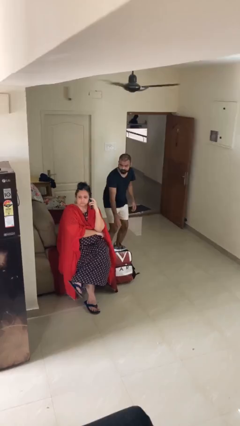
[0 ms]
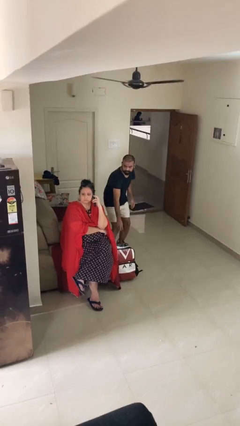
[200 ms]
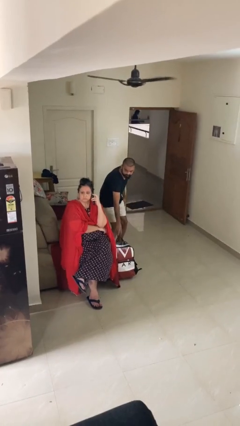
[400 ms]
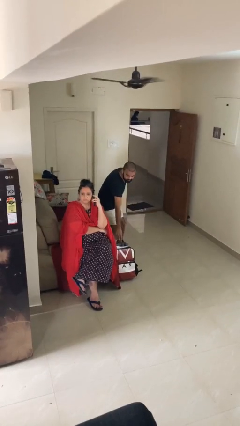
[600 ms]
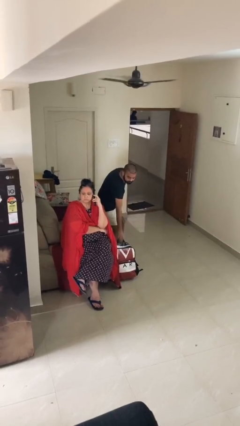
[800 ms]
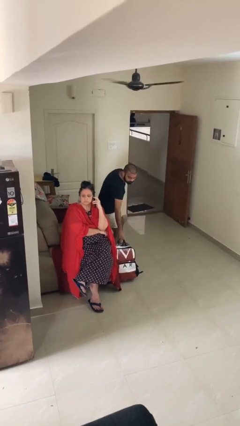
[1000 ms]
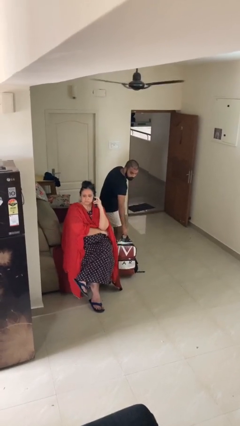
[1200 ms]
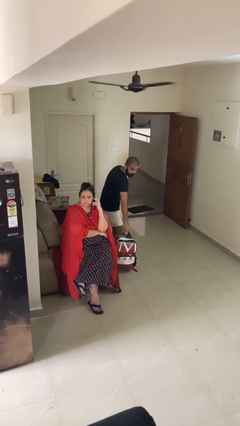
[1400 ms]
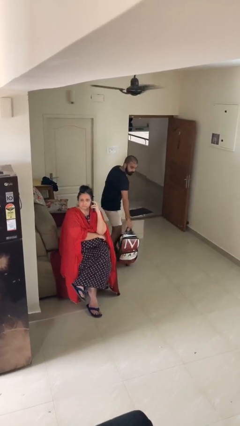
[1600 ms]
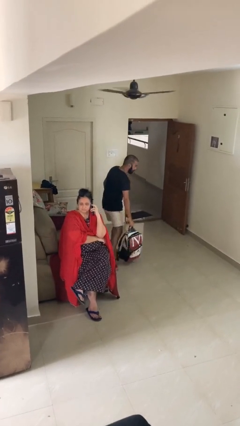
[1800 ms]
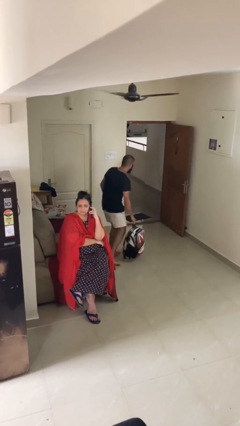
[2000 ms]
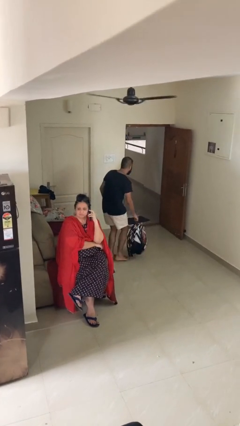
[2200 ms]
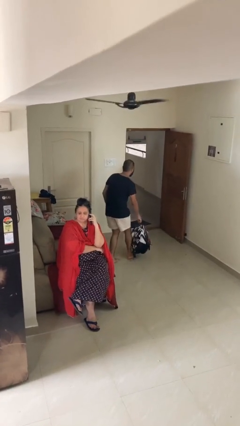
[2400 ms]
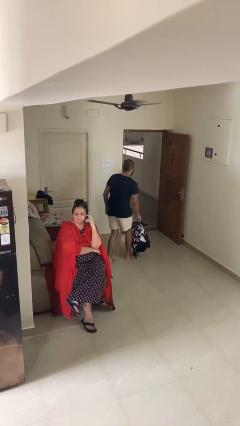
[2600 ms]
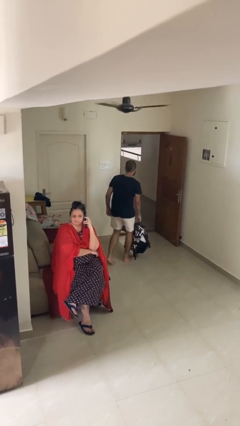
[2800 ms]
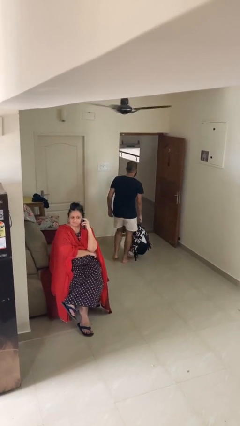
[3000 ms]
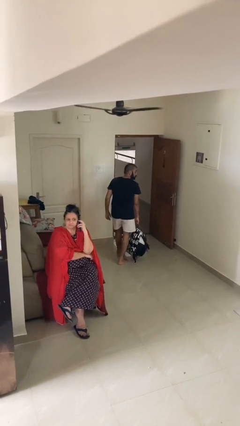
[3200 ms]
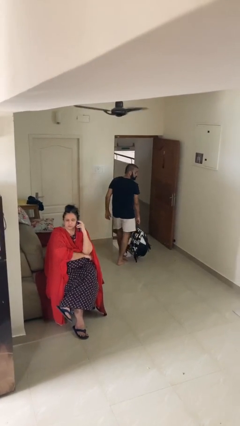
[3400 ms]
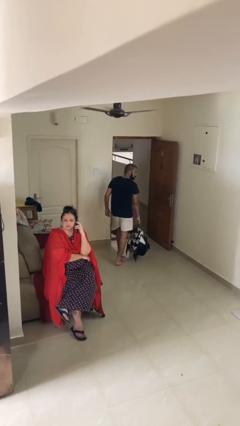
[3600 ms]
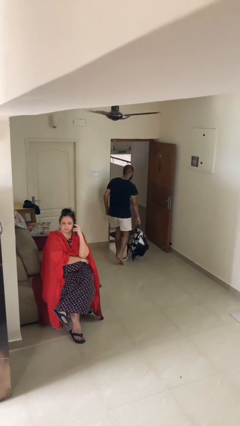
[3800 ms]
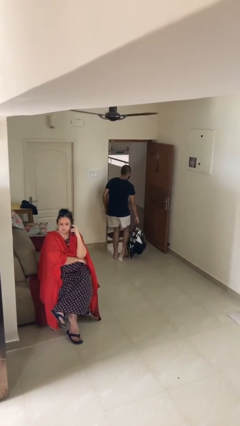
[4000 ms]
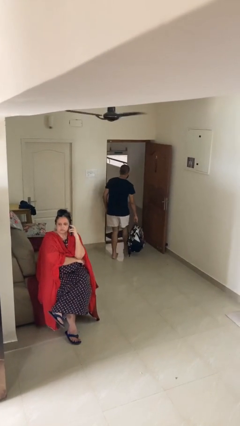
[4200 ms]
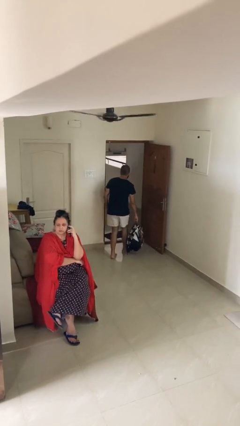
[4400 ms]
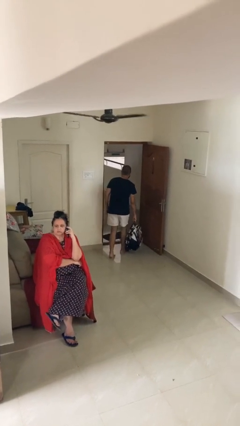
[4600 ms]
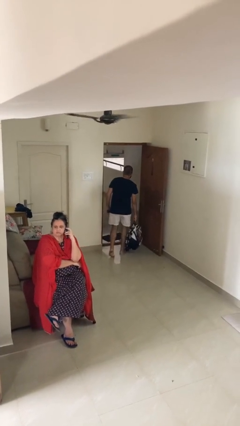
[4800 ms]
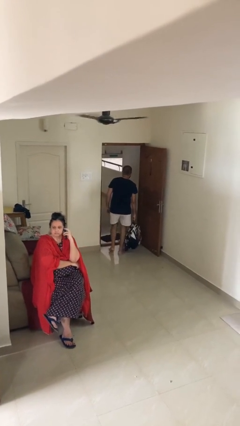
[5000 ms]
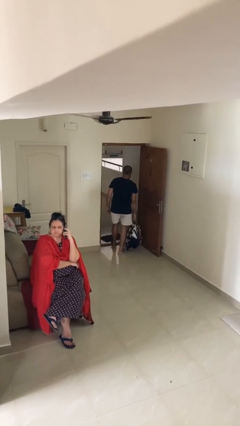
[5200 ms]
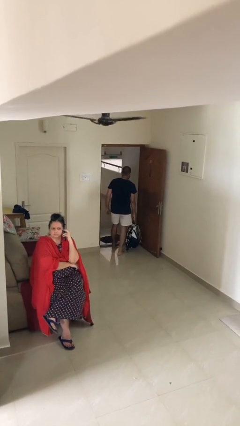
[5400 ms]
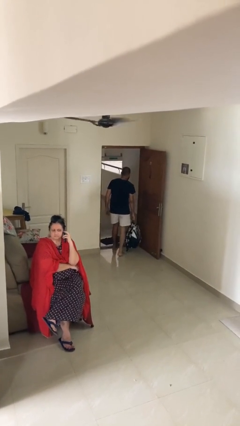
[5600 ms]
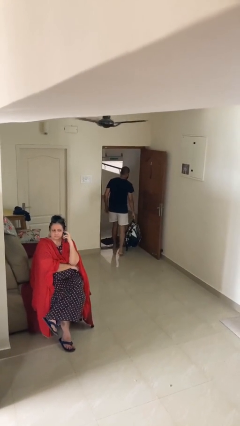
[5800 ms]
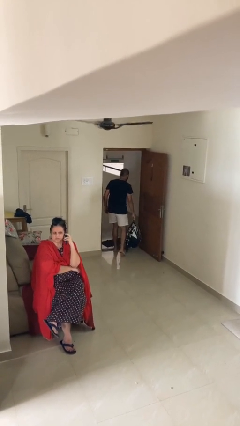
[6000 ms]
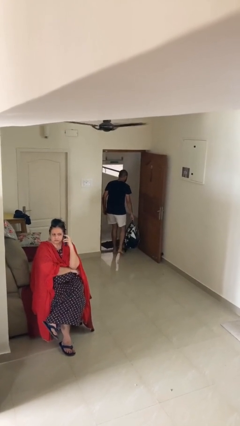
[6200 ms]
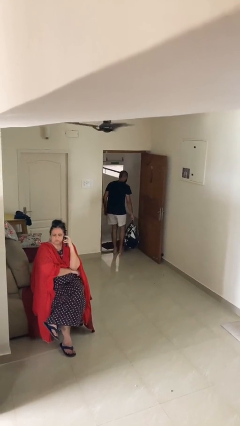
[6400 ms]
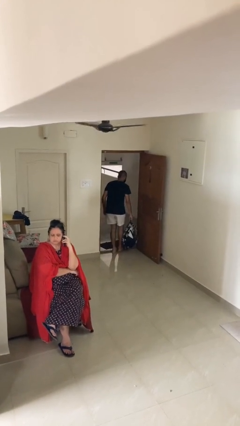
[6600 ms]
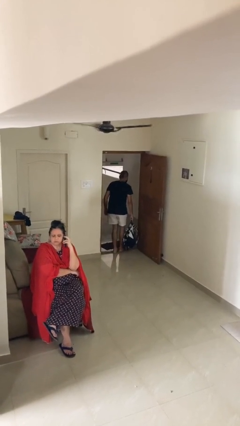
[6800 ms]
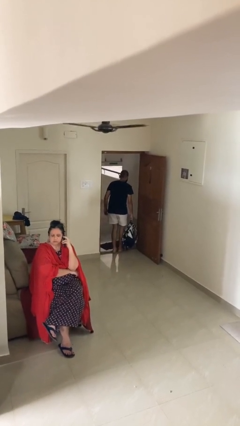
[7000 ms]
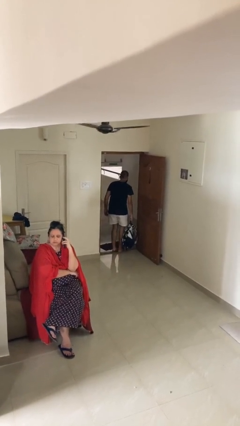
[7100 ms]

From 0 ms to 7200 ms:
person steals object from person

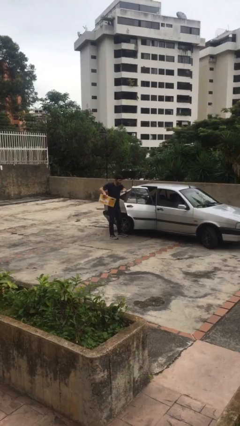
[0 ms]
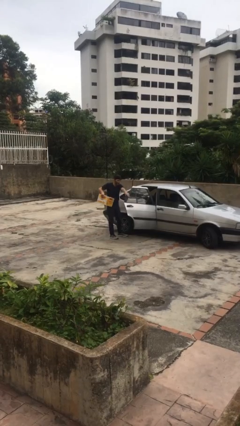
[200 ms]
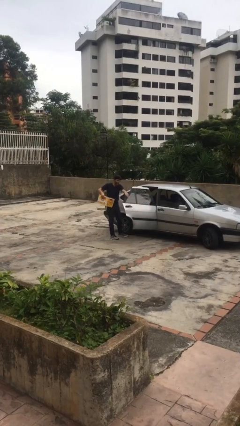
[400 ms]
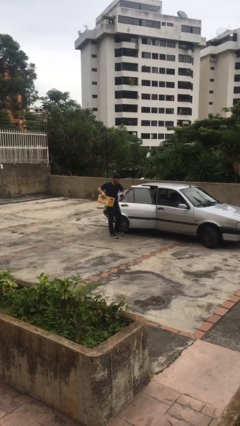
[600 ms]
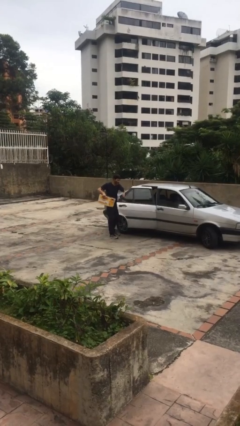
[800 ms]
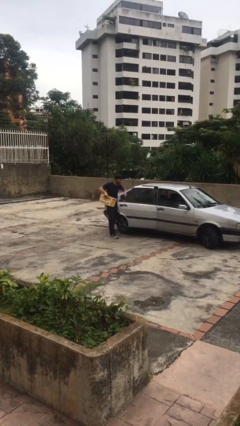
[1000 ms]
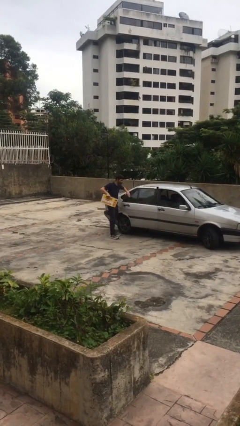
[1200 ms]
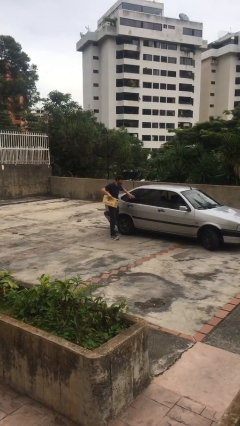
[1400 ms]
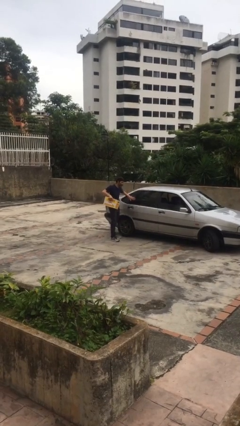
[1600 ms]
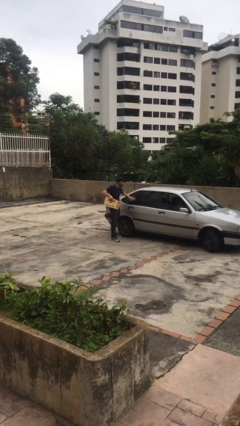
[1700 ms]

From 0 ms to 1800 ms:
person closes car door

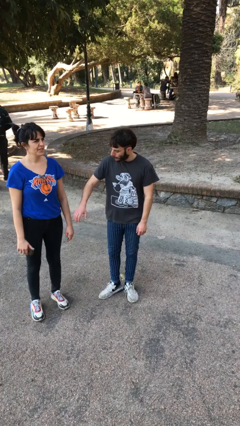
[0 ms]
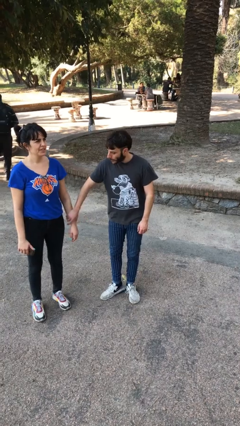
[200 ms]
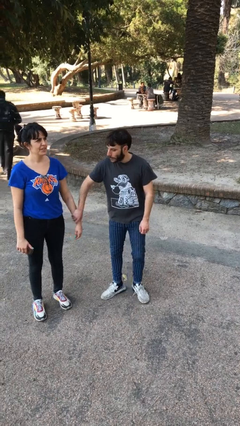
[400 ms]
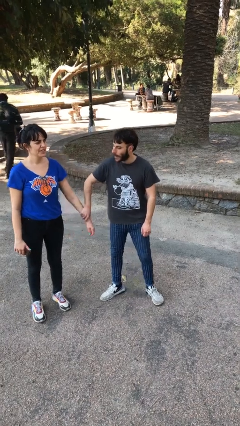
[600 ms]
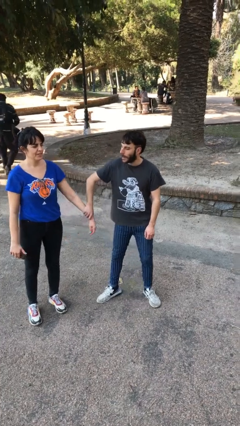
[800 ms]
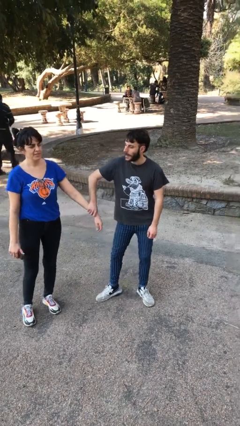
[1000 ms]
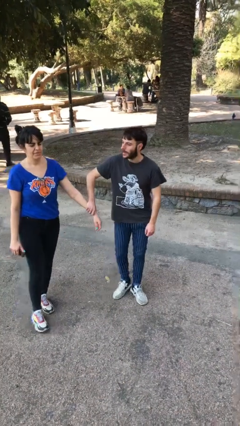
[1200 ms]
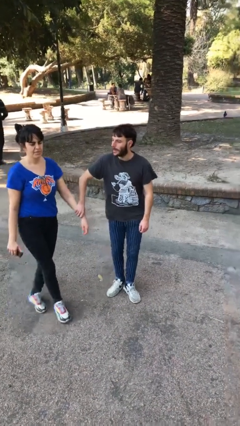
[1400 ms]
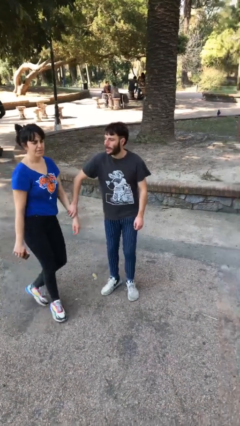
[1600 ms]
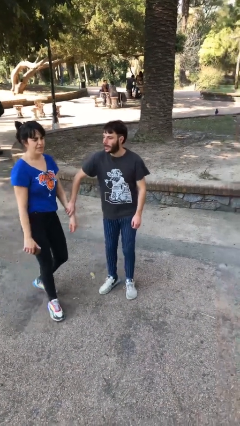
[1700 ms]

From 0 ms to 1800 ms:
person grabs person by forearm

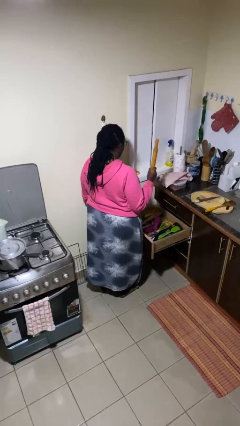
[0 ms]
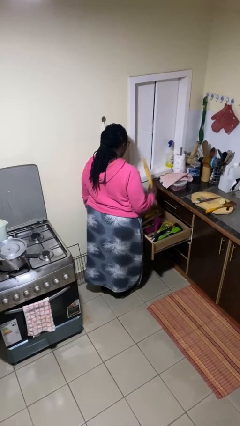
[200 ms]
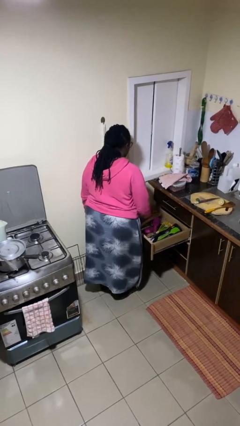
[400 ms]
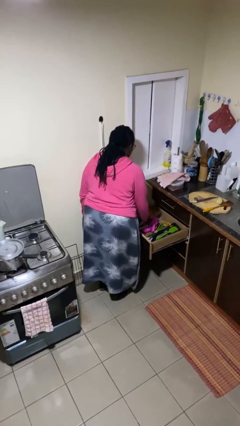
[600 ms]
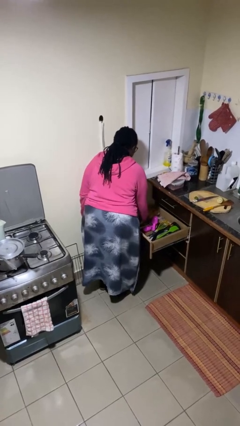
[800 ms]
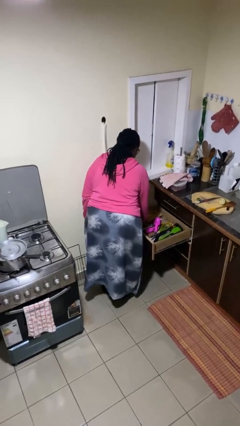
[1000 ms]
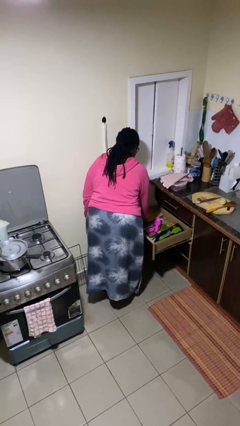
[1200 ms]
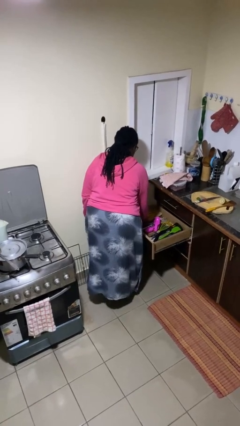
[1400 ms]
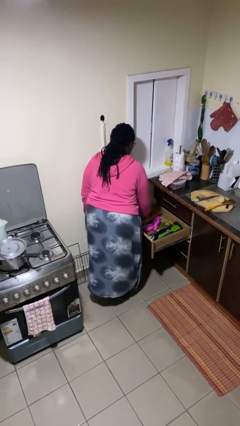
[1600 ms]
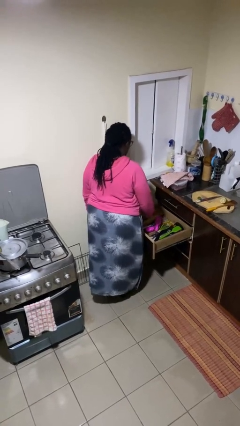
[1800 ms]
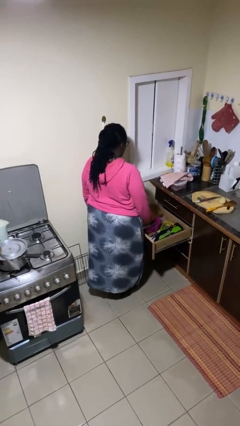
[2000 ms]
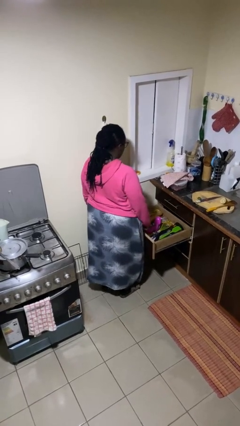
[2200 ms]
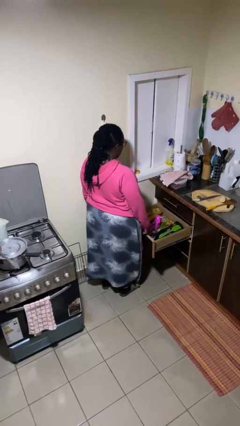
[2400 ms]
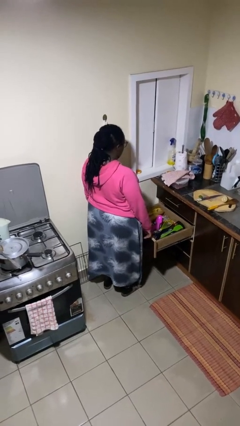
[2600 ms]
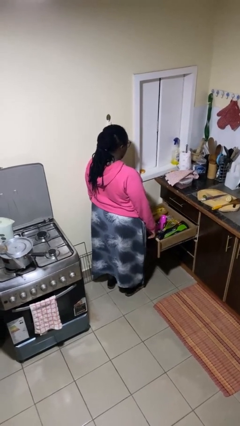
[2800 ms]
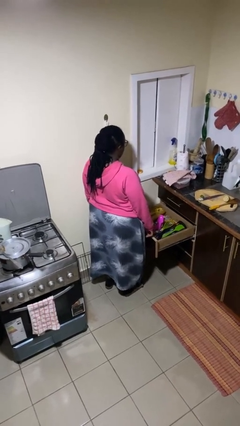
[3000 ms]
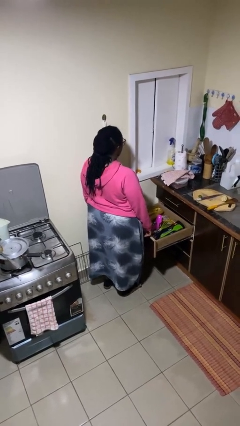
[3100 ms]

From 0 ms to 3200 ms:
person puts object into kitchen drawer

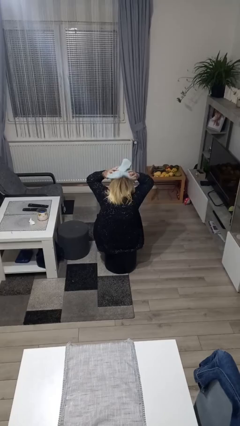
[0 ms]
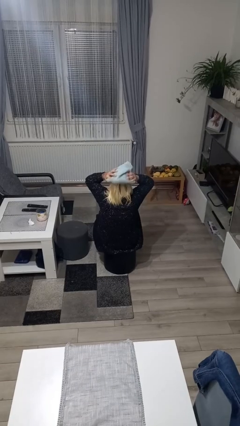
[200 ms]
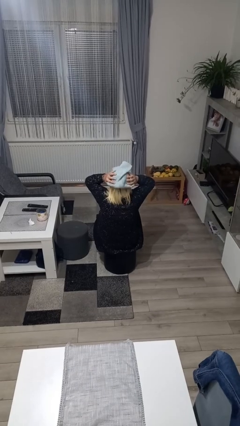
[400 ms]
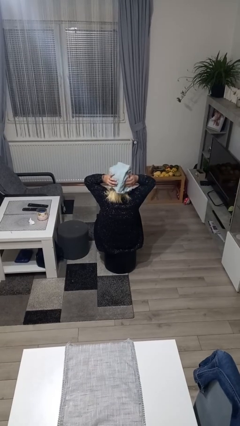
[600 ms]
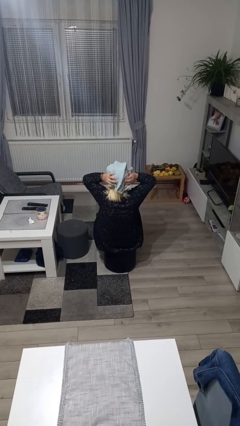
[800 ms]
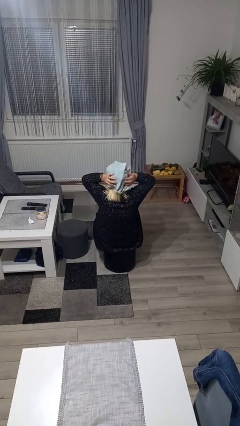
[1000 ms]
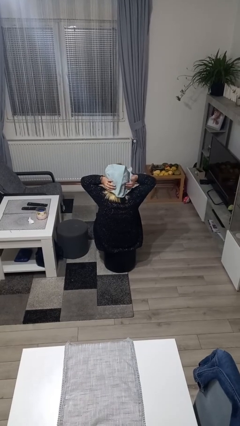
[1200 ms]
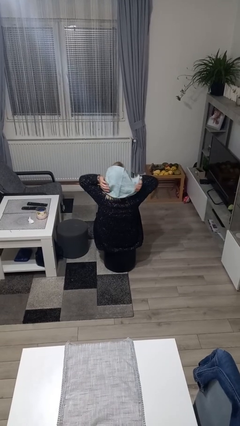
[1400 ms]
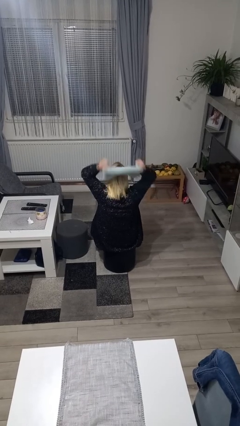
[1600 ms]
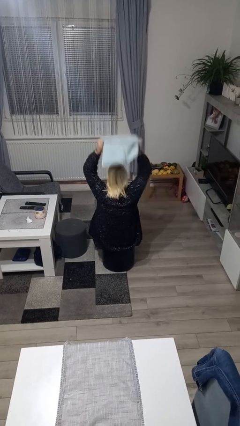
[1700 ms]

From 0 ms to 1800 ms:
person dries hair with towel

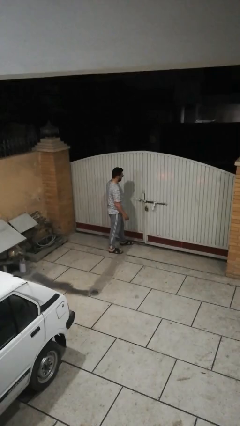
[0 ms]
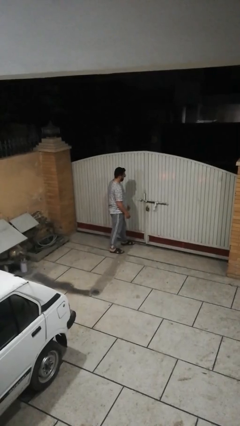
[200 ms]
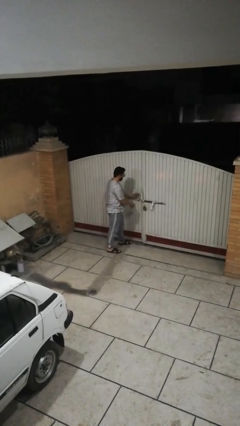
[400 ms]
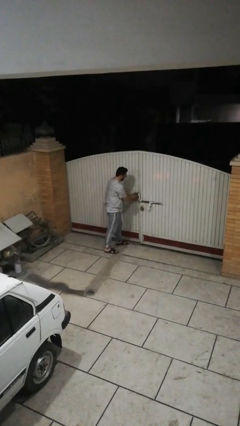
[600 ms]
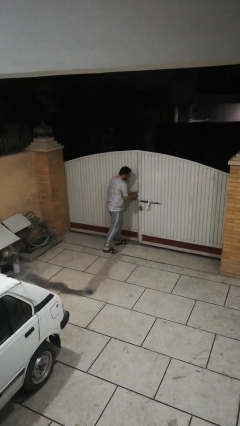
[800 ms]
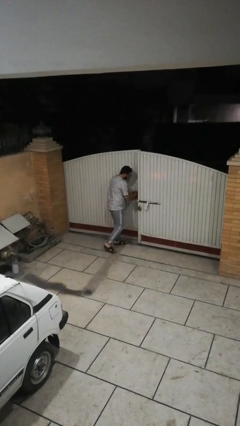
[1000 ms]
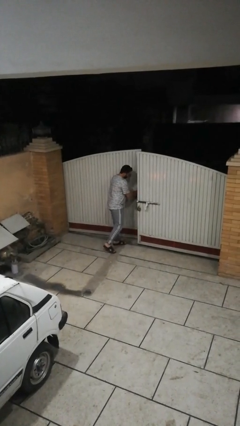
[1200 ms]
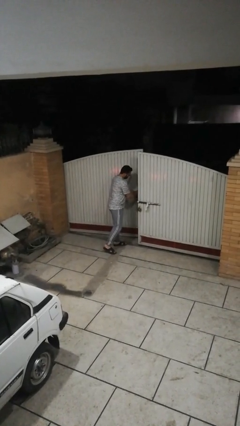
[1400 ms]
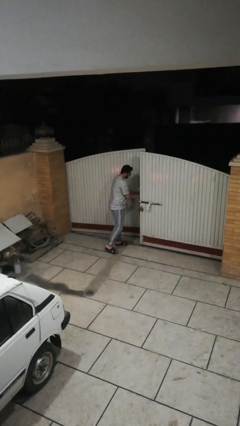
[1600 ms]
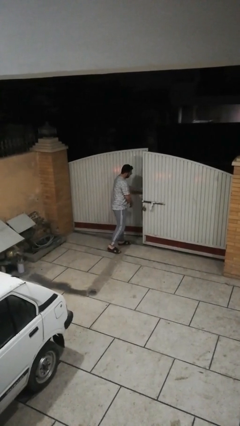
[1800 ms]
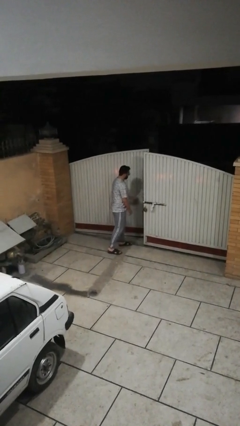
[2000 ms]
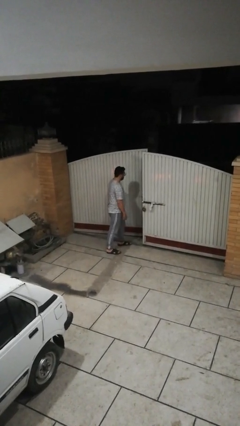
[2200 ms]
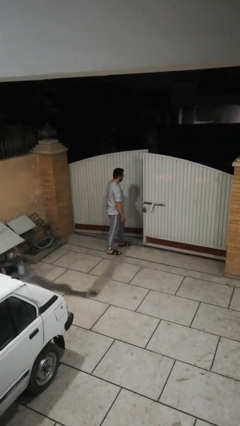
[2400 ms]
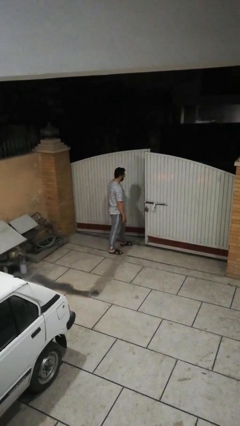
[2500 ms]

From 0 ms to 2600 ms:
person opens facility door
